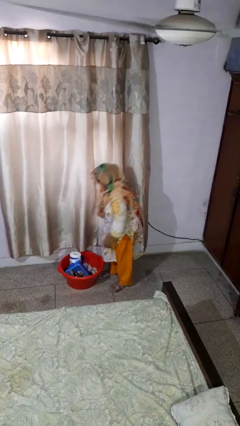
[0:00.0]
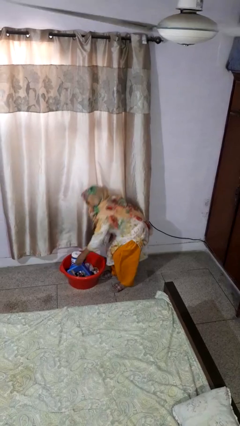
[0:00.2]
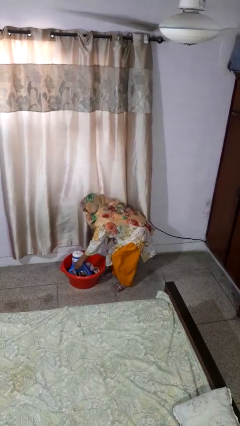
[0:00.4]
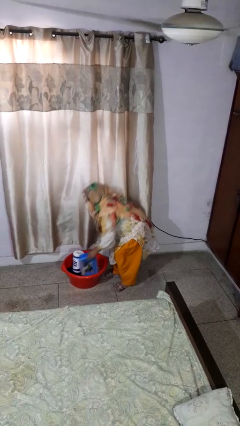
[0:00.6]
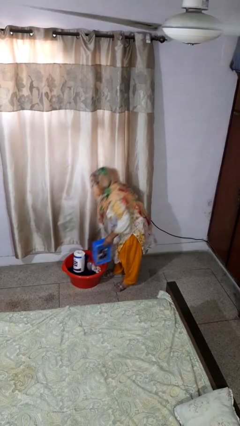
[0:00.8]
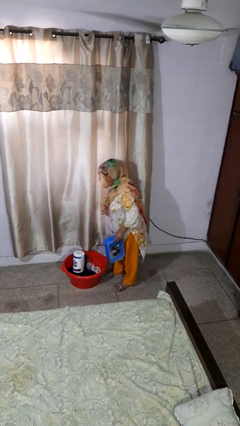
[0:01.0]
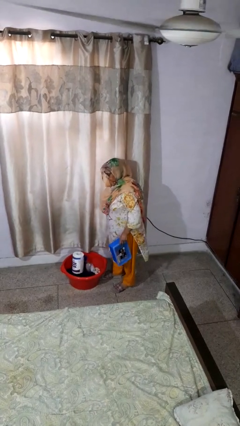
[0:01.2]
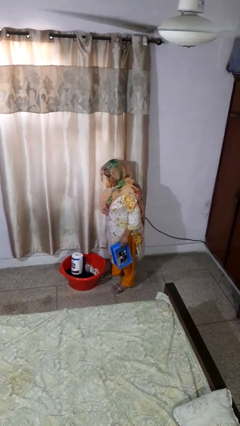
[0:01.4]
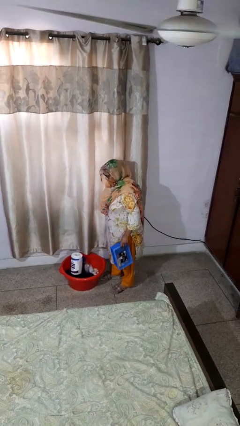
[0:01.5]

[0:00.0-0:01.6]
person takes object from basket

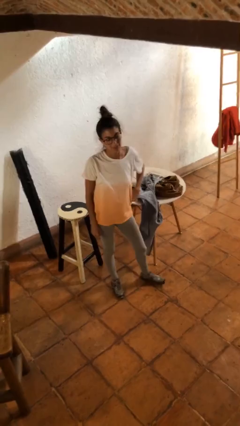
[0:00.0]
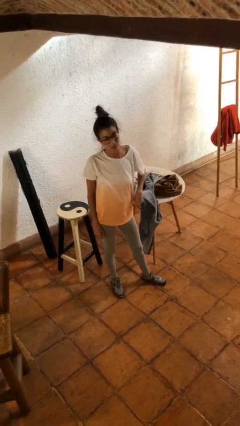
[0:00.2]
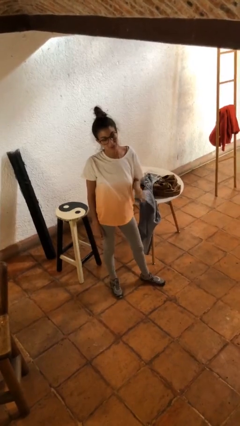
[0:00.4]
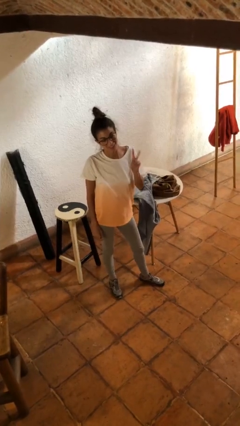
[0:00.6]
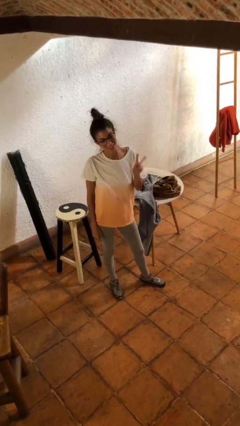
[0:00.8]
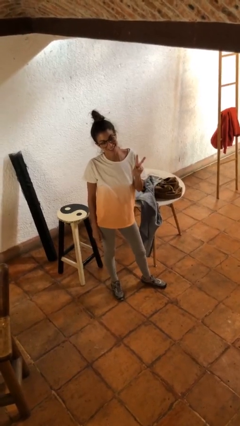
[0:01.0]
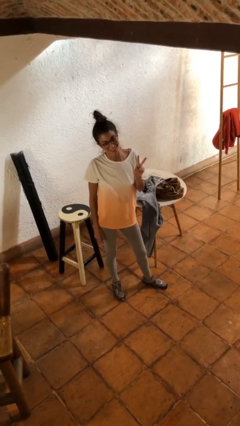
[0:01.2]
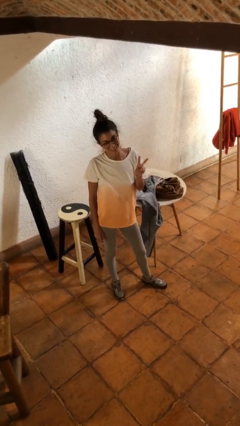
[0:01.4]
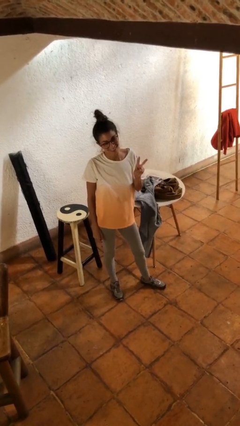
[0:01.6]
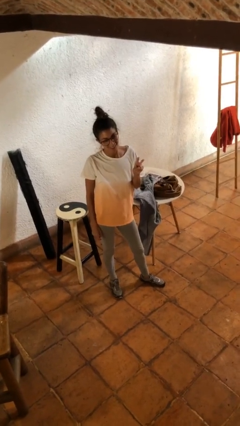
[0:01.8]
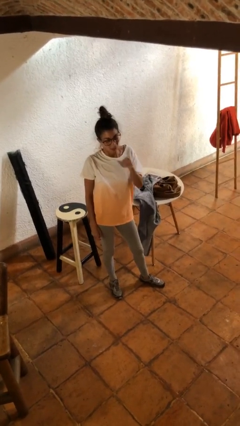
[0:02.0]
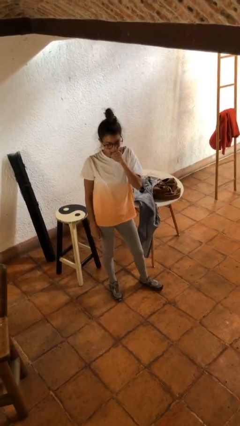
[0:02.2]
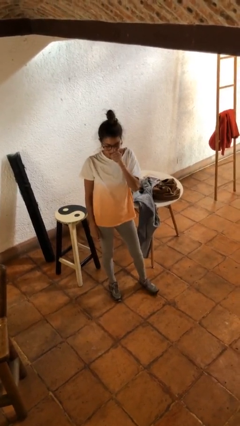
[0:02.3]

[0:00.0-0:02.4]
person gestures peace

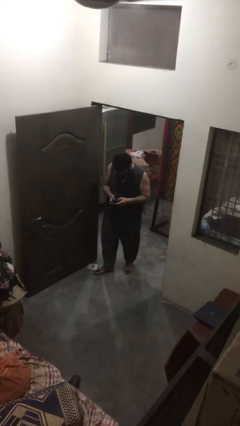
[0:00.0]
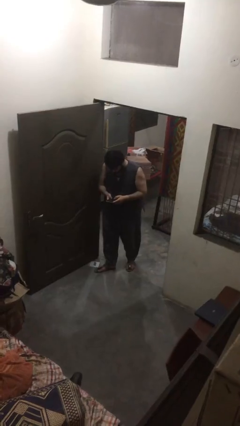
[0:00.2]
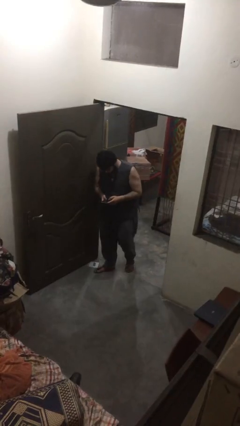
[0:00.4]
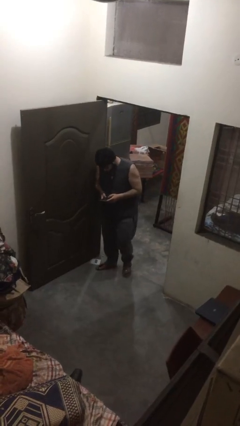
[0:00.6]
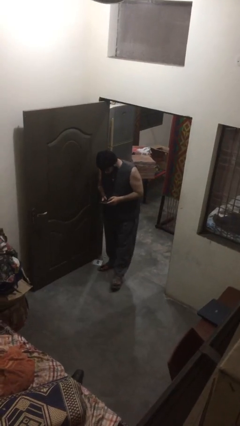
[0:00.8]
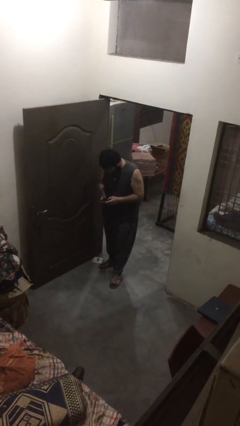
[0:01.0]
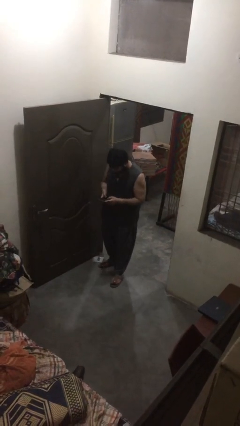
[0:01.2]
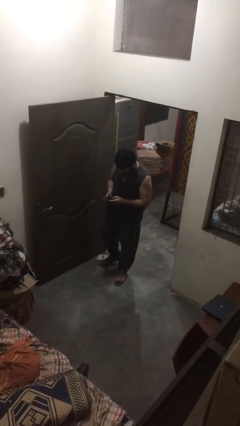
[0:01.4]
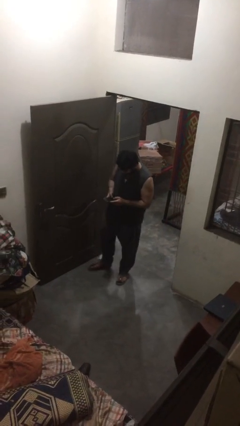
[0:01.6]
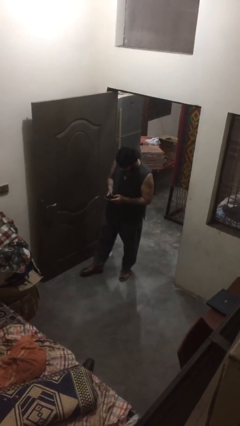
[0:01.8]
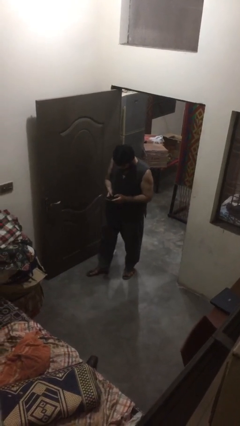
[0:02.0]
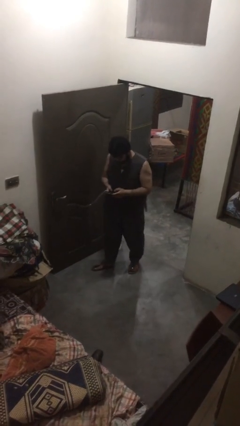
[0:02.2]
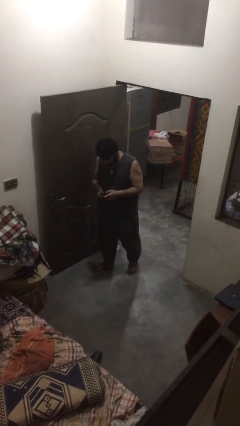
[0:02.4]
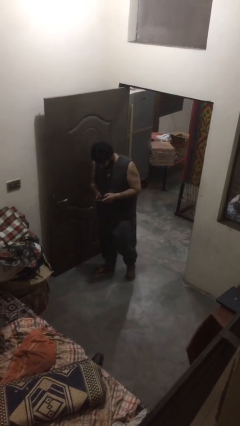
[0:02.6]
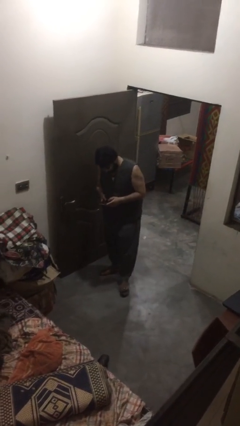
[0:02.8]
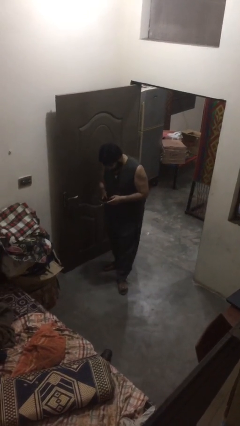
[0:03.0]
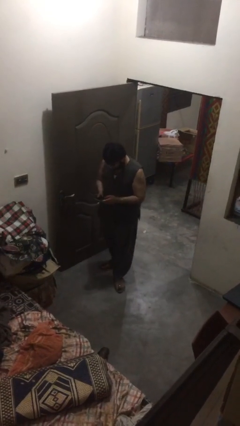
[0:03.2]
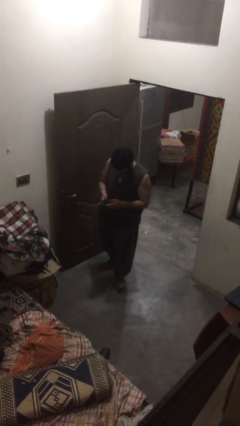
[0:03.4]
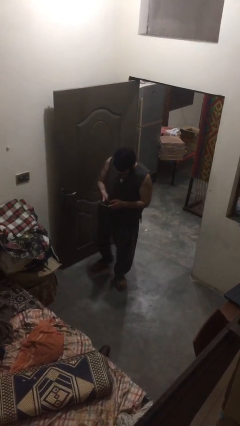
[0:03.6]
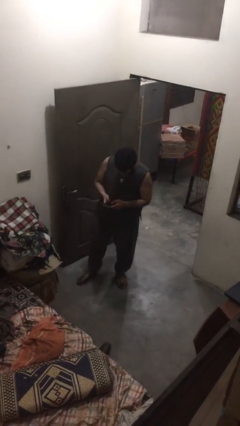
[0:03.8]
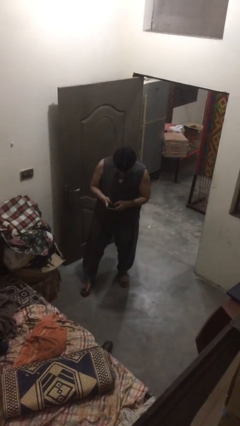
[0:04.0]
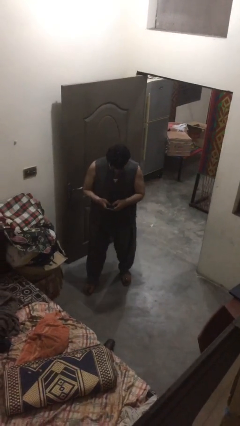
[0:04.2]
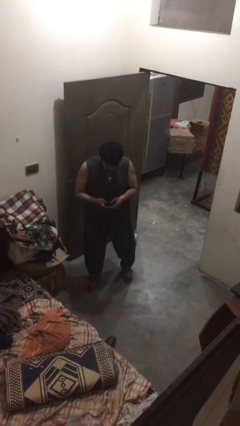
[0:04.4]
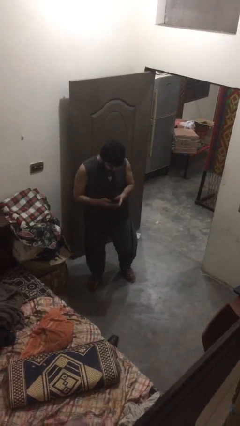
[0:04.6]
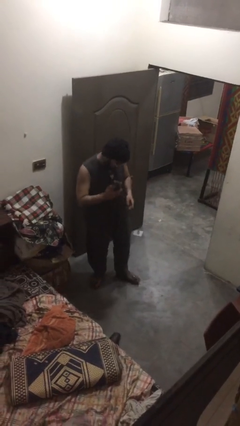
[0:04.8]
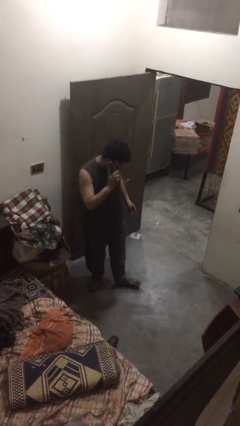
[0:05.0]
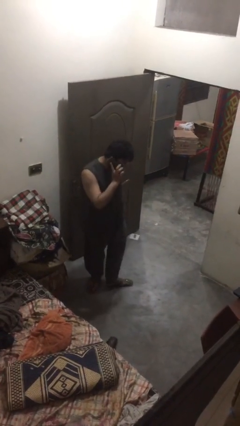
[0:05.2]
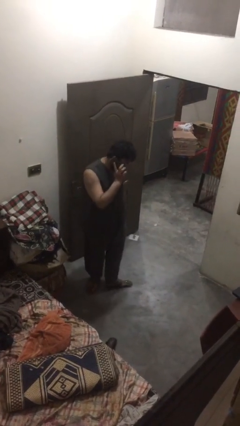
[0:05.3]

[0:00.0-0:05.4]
person texts on phone

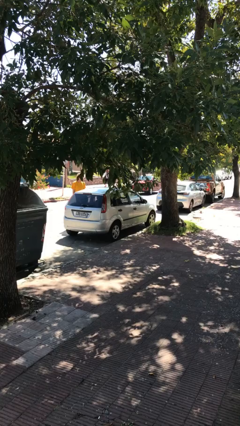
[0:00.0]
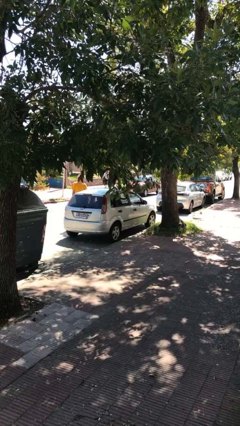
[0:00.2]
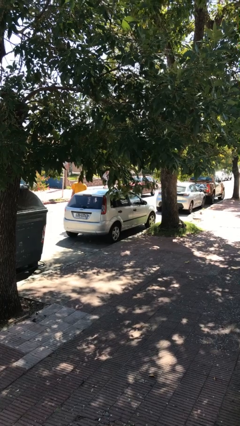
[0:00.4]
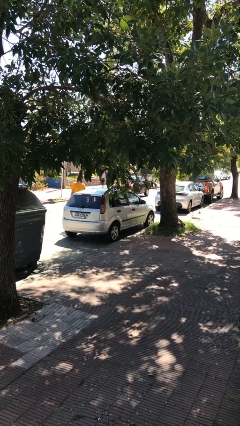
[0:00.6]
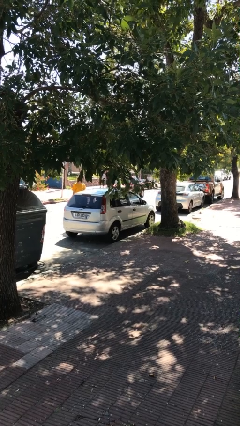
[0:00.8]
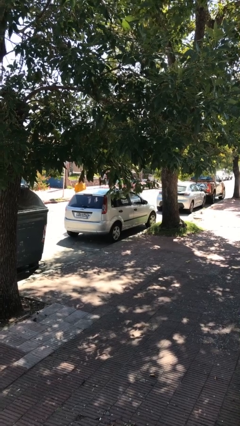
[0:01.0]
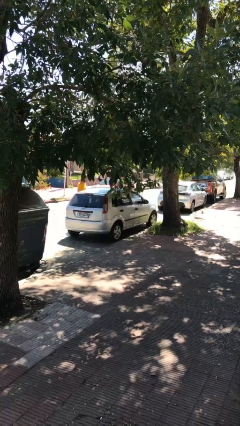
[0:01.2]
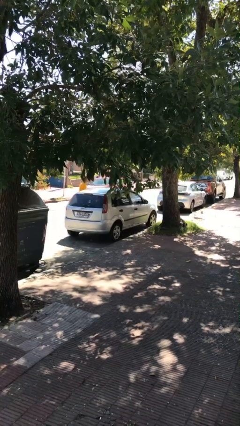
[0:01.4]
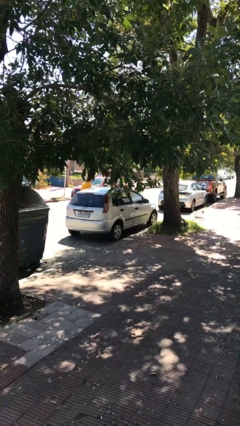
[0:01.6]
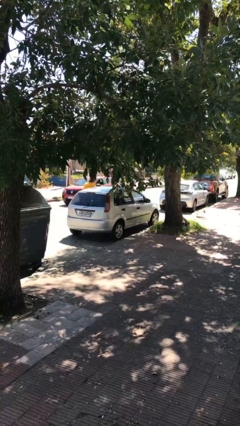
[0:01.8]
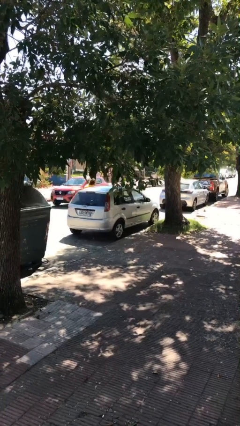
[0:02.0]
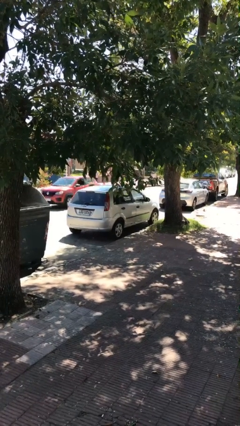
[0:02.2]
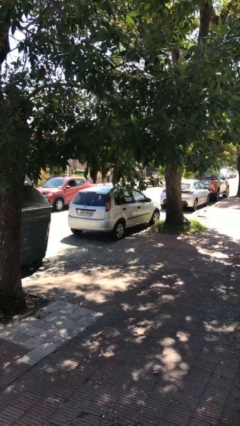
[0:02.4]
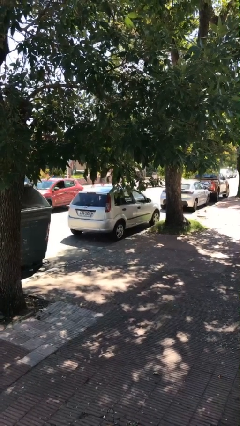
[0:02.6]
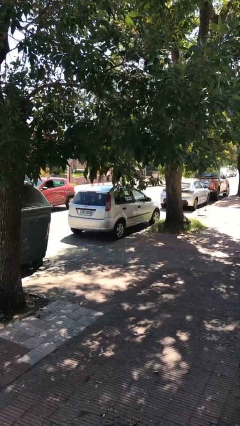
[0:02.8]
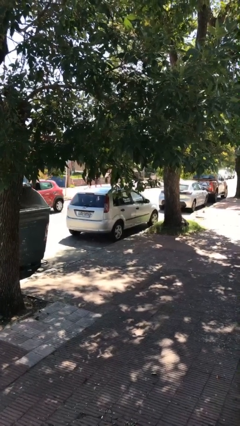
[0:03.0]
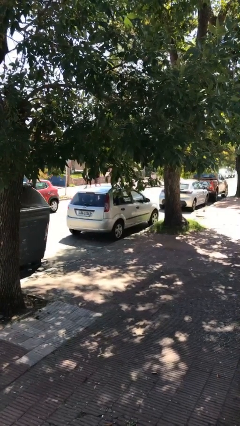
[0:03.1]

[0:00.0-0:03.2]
car picks up person

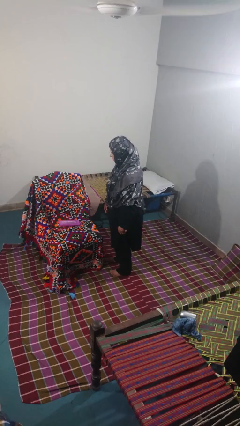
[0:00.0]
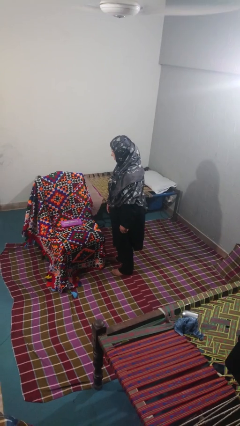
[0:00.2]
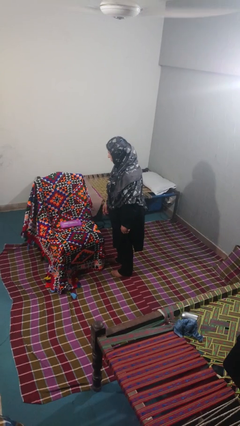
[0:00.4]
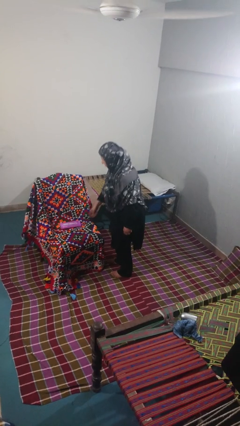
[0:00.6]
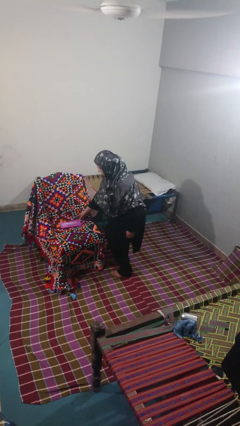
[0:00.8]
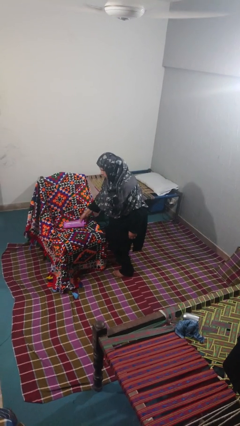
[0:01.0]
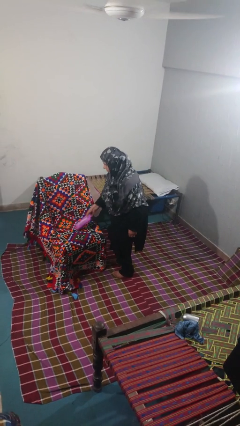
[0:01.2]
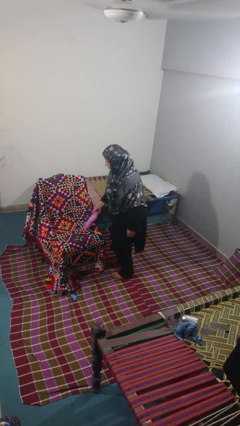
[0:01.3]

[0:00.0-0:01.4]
person picks up object from couch

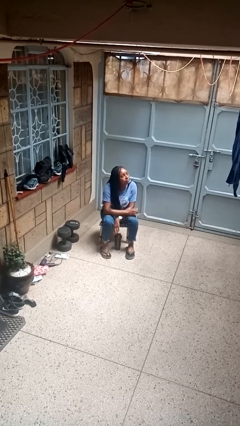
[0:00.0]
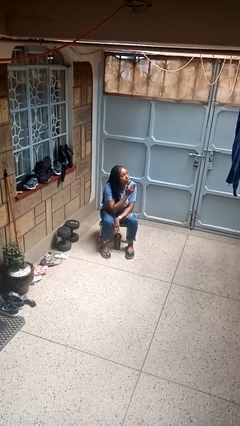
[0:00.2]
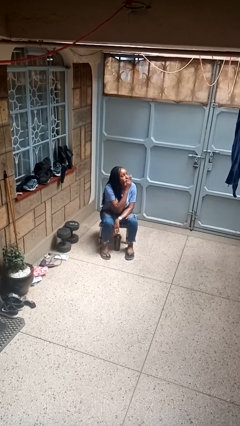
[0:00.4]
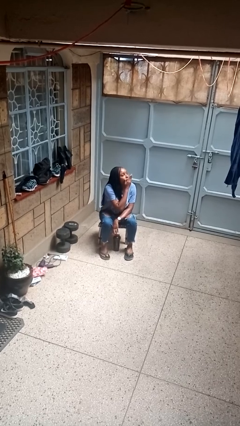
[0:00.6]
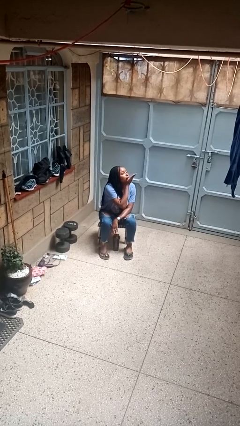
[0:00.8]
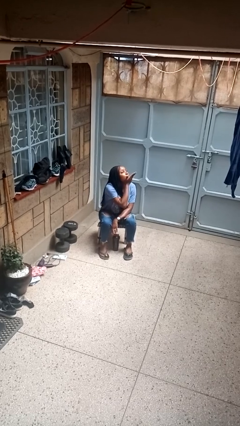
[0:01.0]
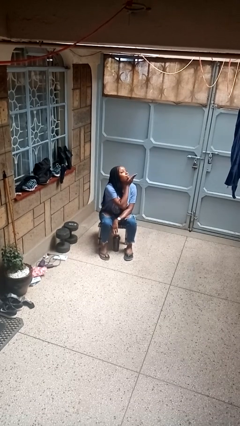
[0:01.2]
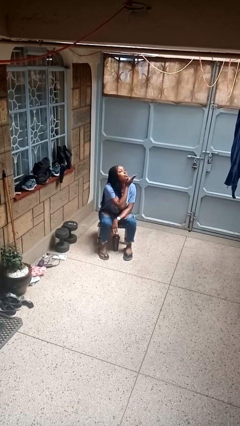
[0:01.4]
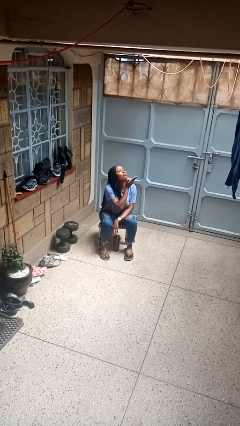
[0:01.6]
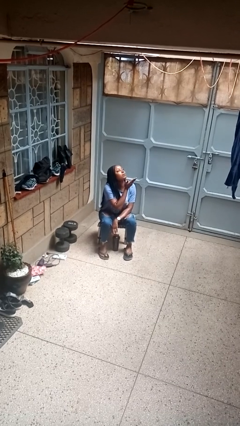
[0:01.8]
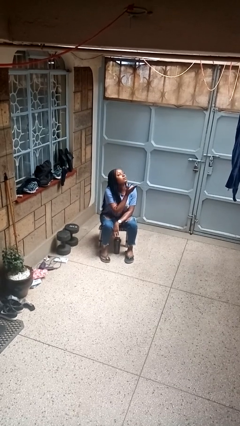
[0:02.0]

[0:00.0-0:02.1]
person gestures blow kiss

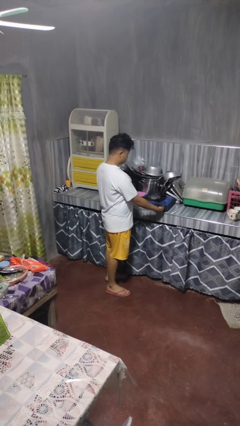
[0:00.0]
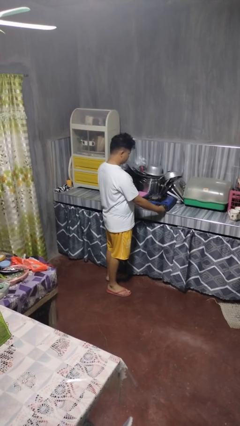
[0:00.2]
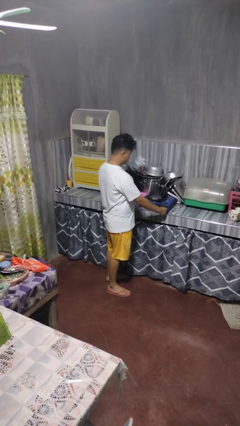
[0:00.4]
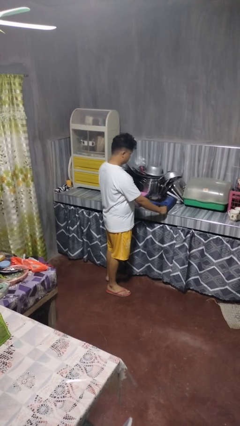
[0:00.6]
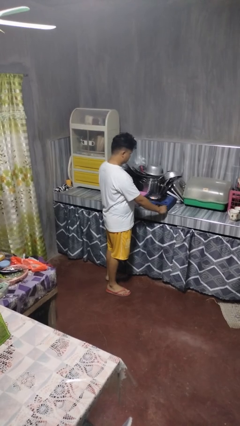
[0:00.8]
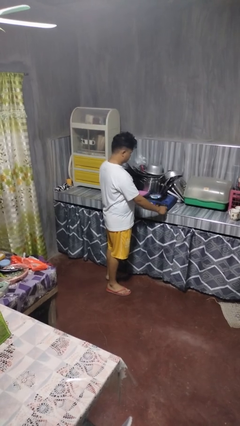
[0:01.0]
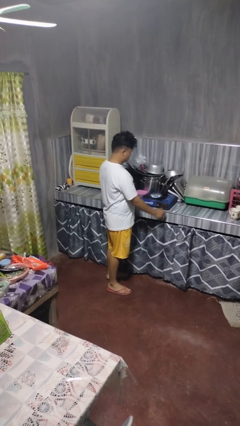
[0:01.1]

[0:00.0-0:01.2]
person turns on stovetop
